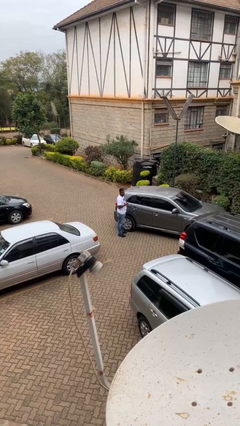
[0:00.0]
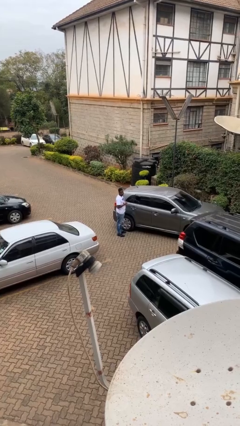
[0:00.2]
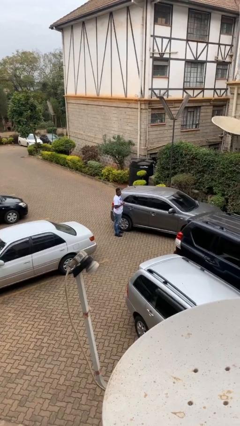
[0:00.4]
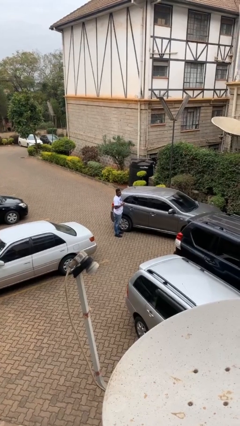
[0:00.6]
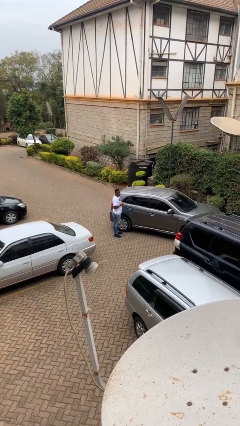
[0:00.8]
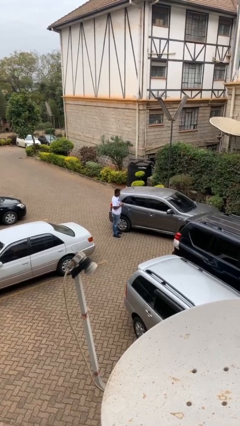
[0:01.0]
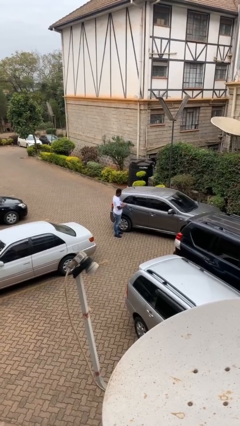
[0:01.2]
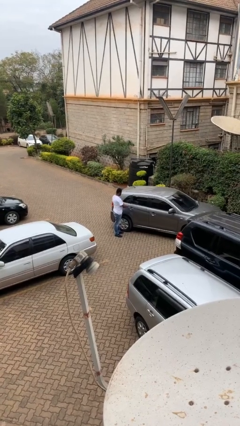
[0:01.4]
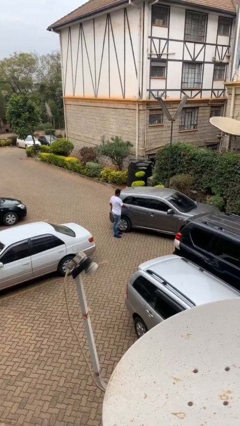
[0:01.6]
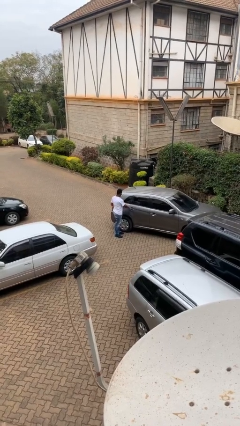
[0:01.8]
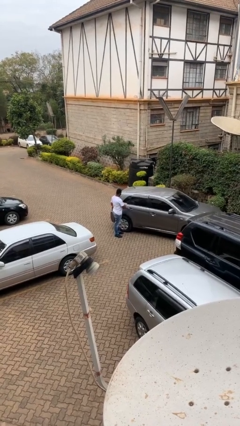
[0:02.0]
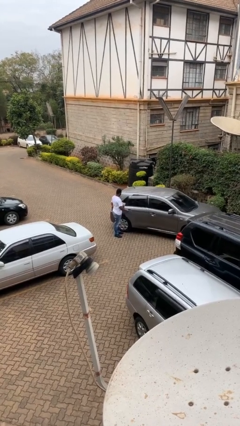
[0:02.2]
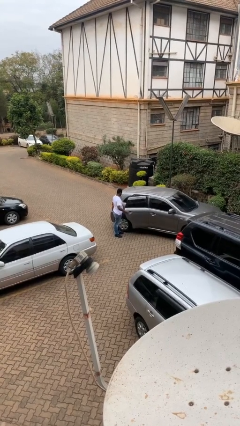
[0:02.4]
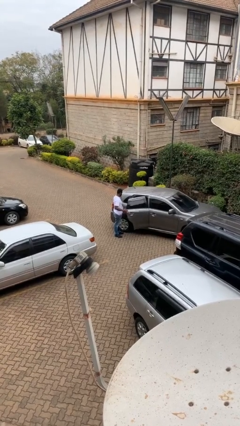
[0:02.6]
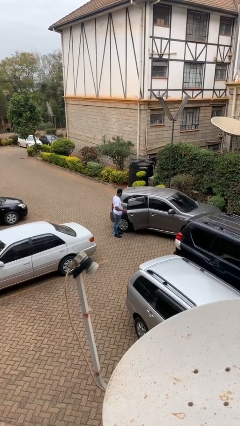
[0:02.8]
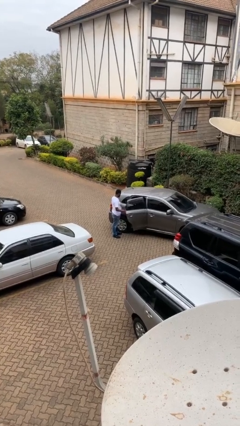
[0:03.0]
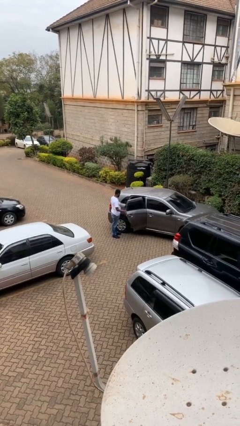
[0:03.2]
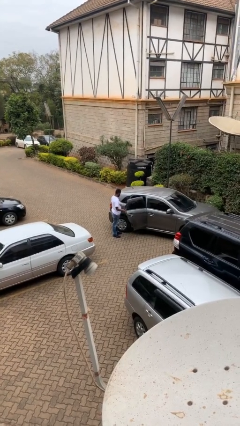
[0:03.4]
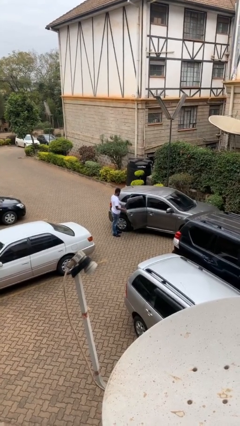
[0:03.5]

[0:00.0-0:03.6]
person opens car door

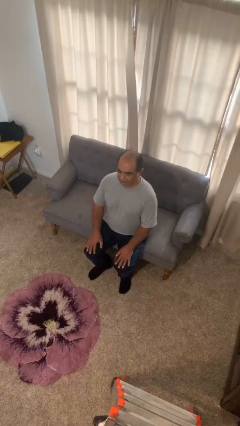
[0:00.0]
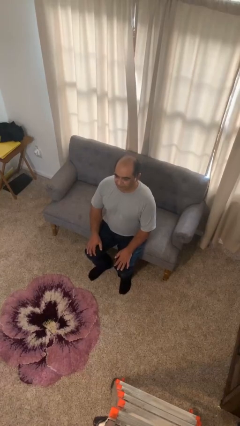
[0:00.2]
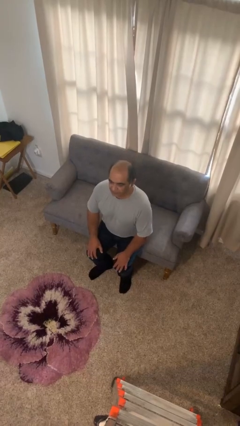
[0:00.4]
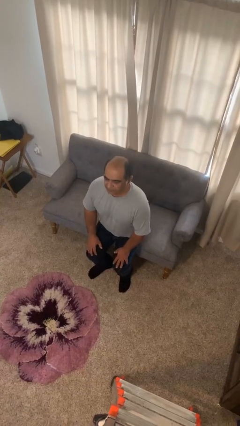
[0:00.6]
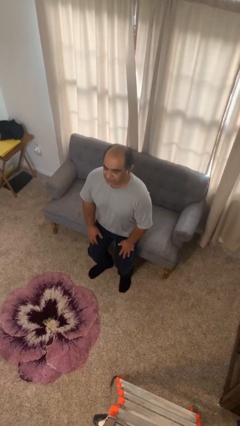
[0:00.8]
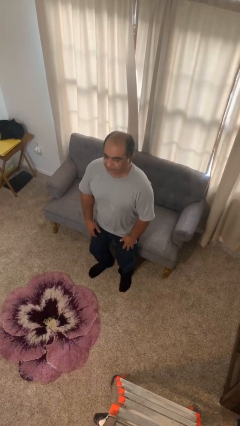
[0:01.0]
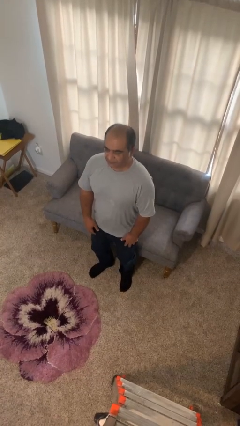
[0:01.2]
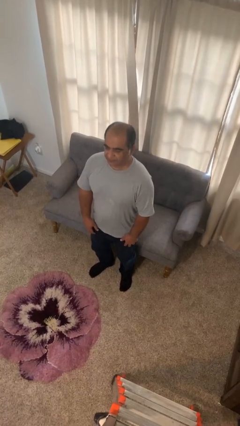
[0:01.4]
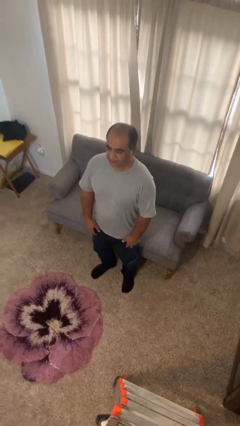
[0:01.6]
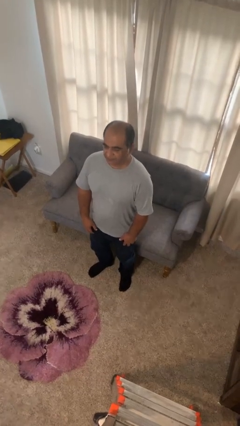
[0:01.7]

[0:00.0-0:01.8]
person stands up

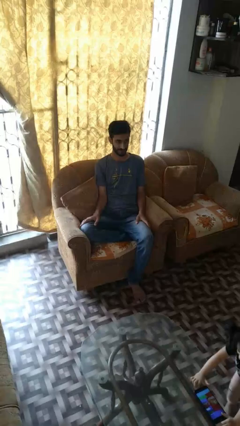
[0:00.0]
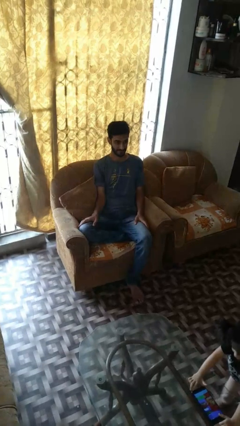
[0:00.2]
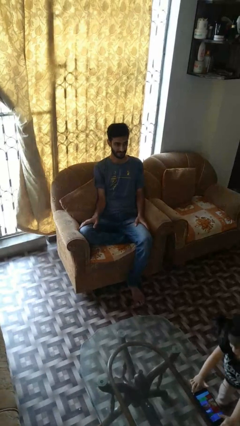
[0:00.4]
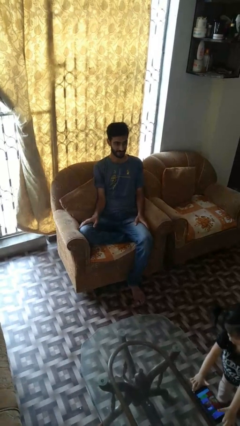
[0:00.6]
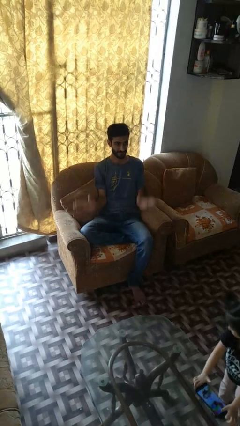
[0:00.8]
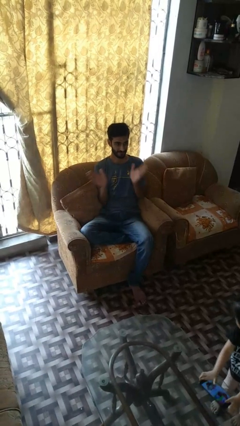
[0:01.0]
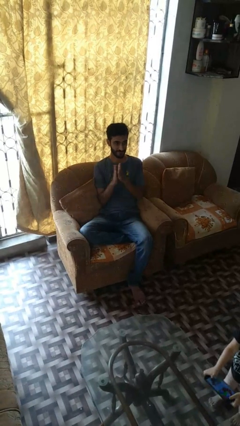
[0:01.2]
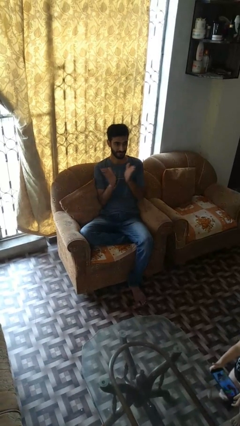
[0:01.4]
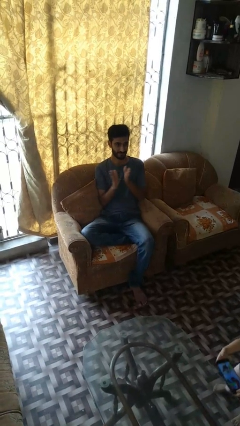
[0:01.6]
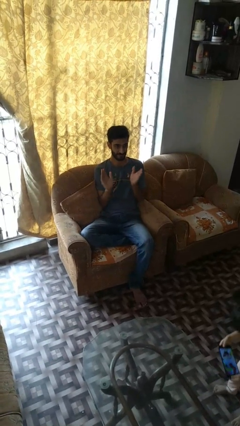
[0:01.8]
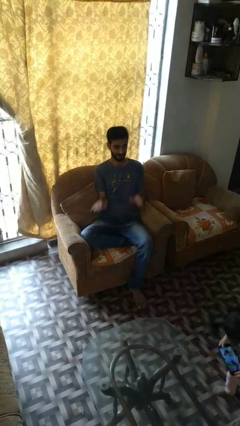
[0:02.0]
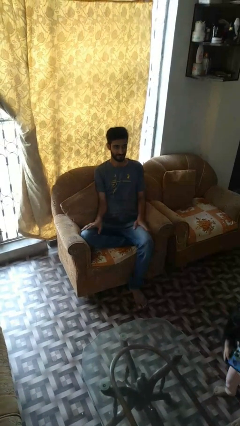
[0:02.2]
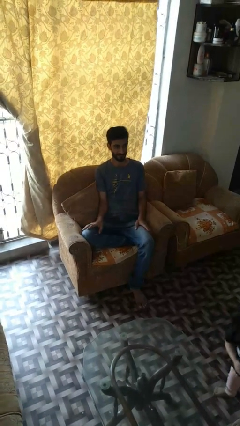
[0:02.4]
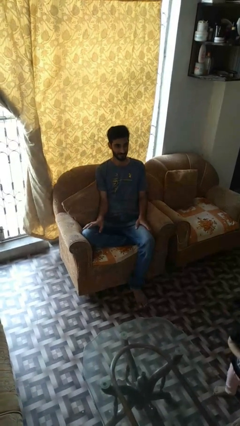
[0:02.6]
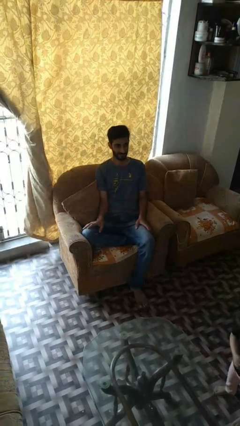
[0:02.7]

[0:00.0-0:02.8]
person claps hands

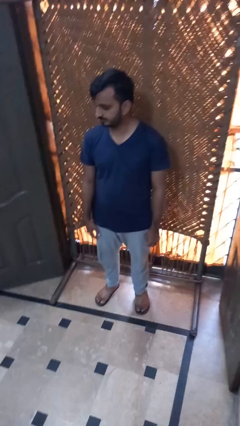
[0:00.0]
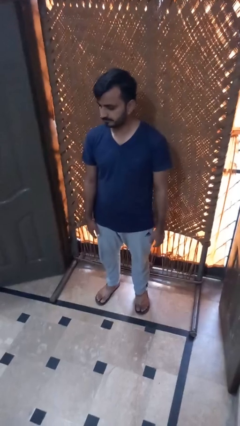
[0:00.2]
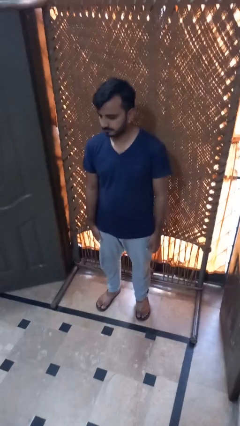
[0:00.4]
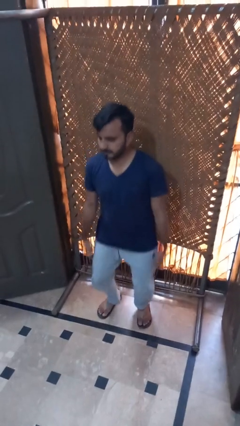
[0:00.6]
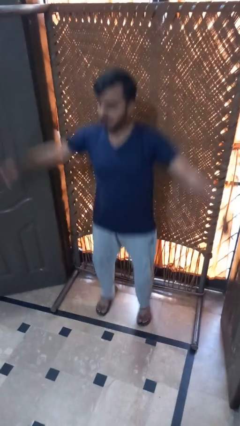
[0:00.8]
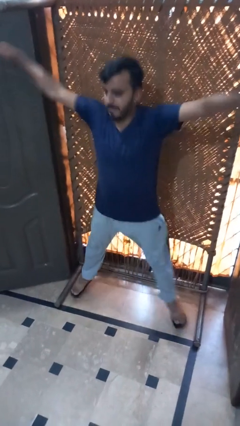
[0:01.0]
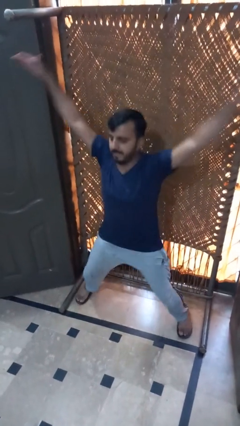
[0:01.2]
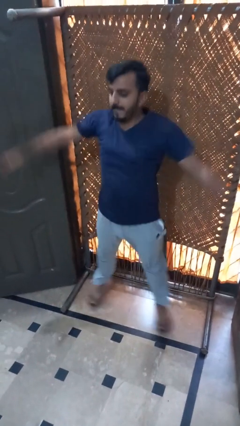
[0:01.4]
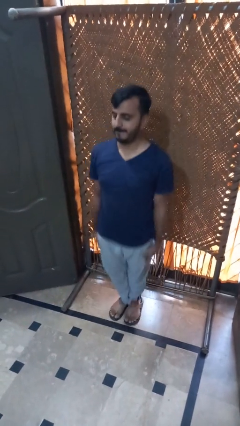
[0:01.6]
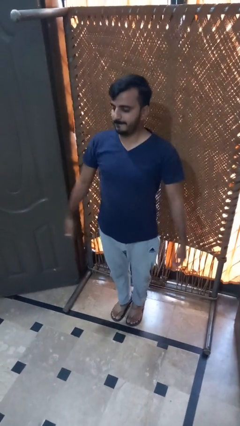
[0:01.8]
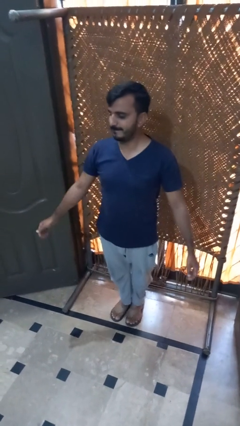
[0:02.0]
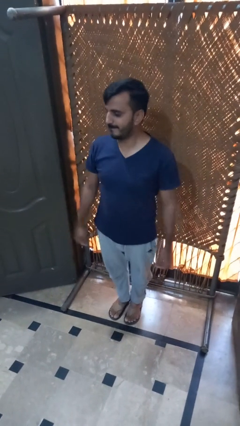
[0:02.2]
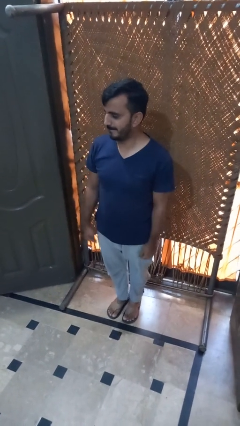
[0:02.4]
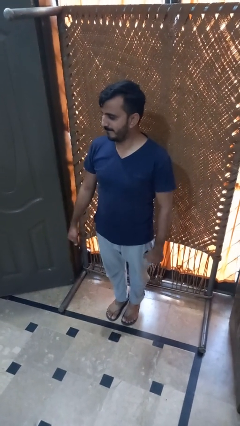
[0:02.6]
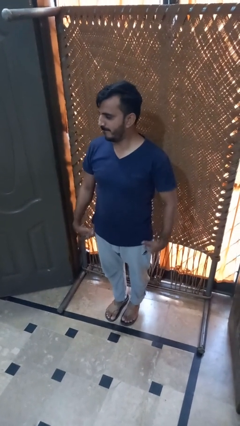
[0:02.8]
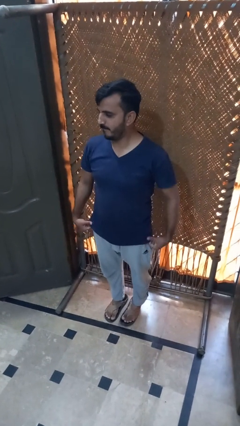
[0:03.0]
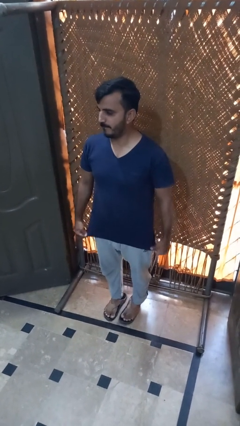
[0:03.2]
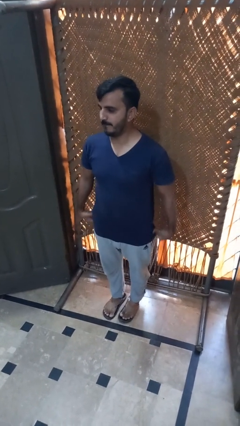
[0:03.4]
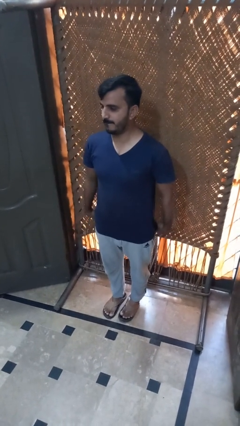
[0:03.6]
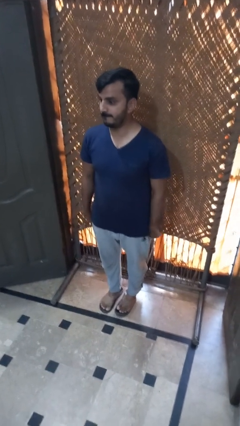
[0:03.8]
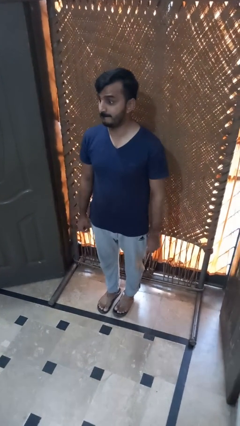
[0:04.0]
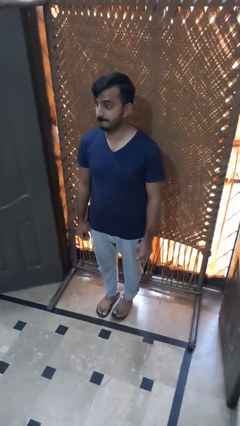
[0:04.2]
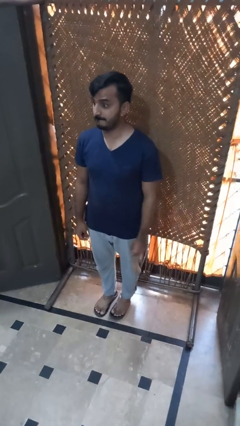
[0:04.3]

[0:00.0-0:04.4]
person exercises with jumping jacks

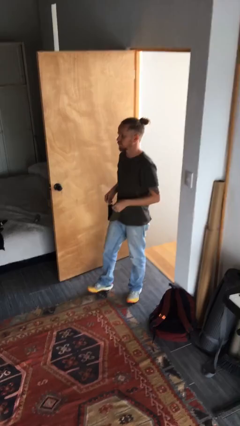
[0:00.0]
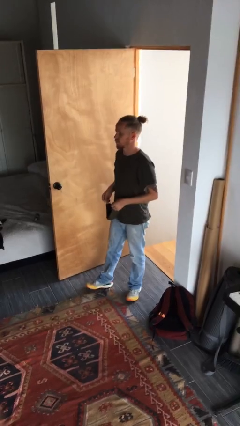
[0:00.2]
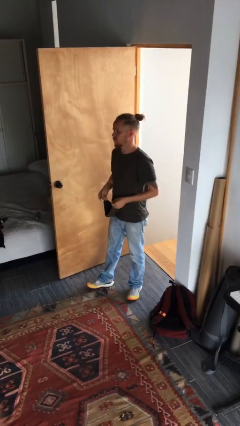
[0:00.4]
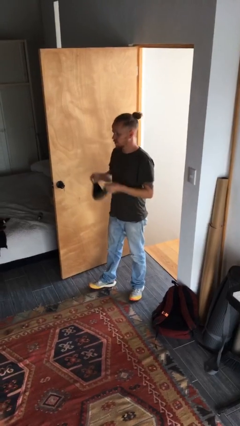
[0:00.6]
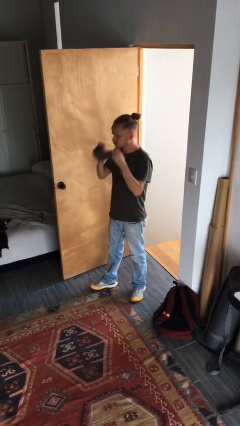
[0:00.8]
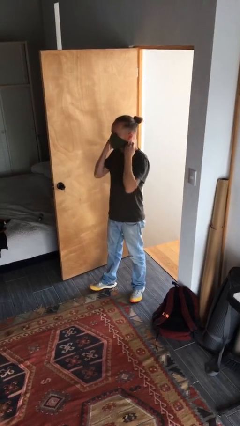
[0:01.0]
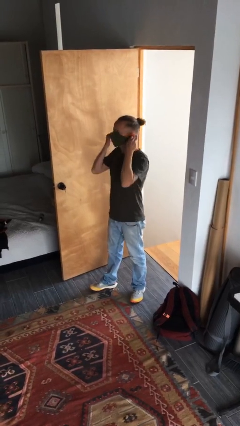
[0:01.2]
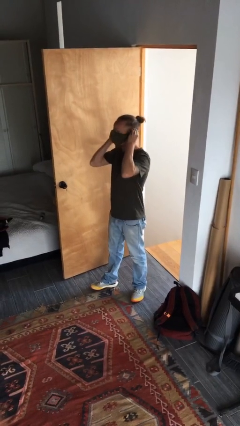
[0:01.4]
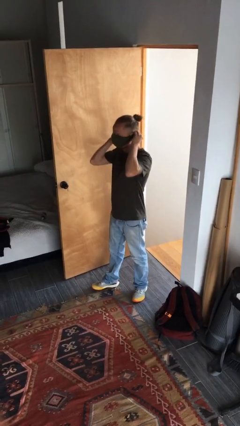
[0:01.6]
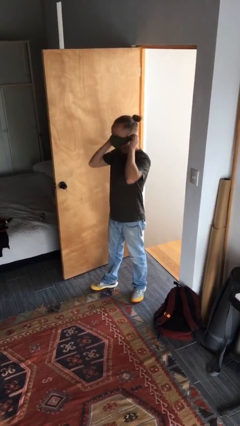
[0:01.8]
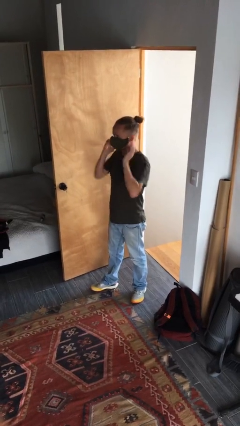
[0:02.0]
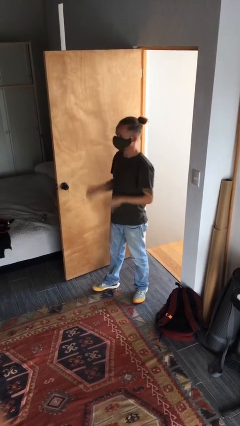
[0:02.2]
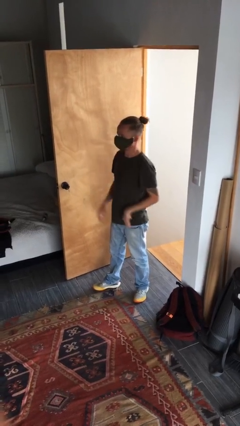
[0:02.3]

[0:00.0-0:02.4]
person puts on facemask

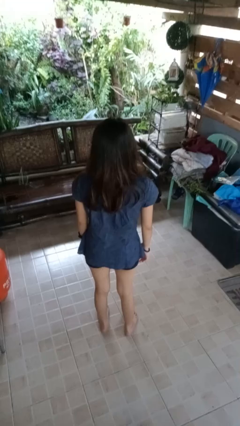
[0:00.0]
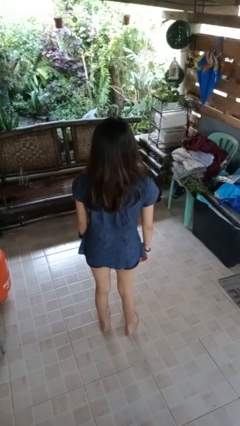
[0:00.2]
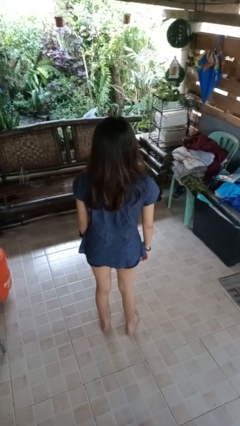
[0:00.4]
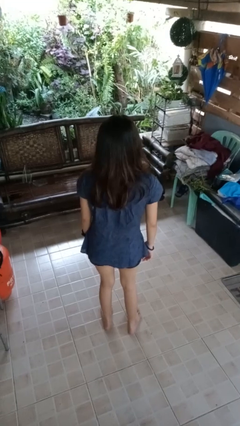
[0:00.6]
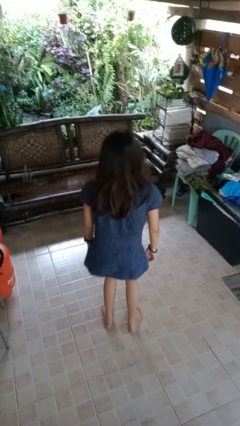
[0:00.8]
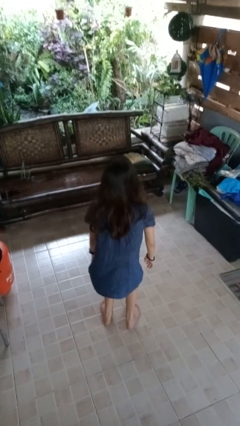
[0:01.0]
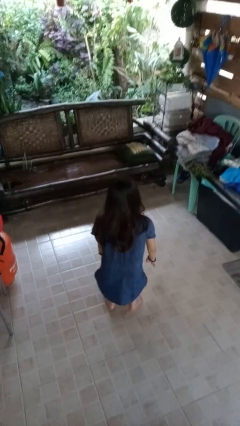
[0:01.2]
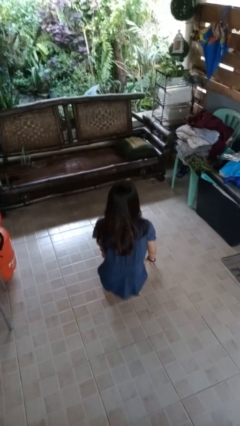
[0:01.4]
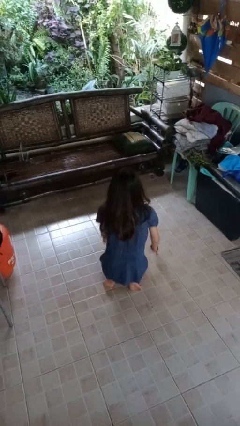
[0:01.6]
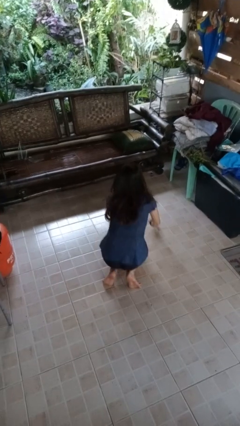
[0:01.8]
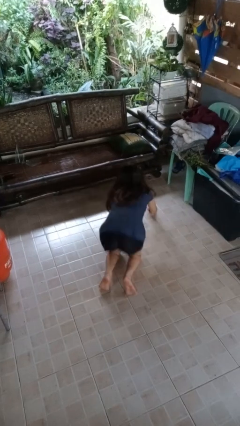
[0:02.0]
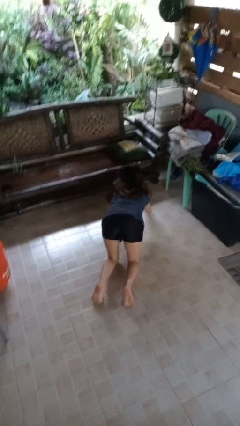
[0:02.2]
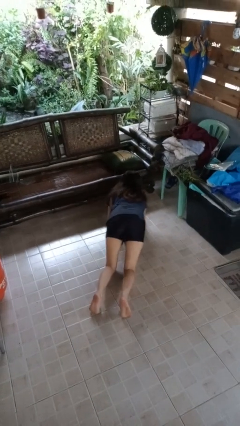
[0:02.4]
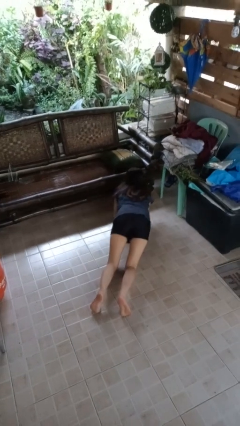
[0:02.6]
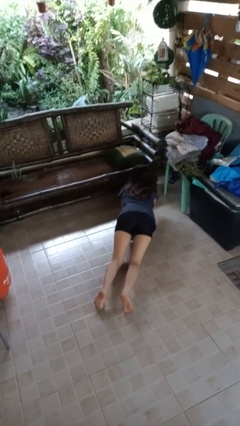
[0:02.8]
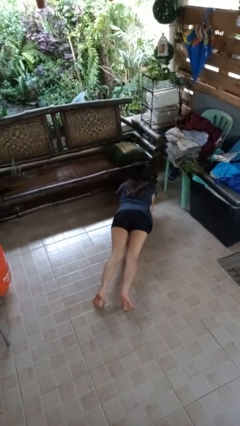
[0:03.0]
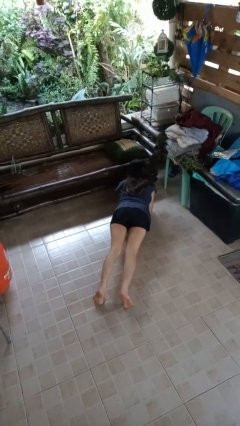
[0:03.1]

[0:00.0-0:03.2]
person exercises with plank
